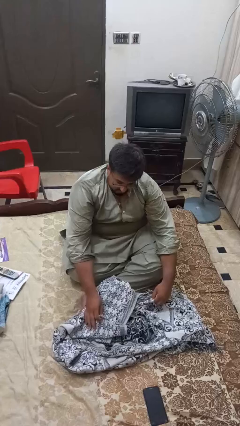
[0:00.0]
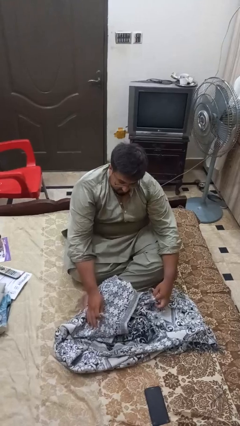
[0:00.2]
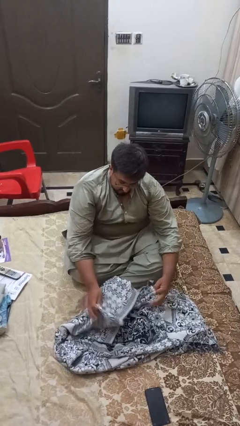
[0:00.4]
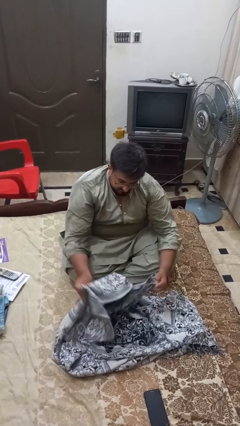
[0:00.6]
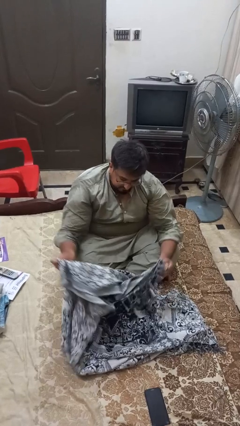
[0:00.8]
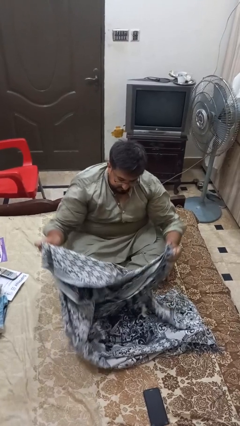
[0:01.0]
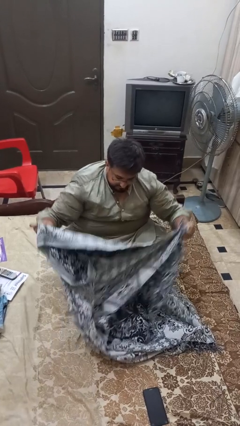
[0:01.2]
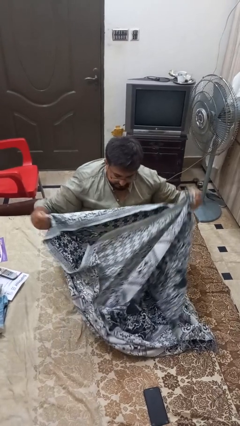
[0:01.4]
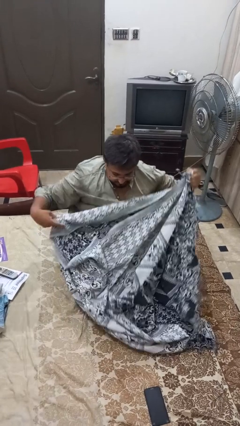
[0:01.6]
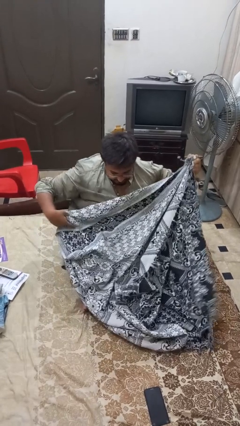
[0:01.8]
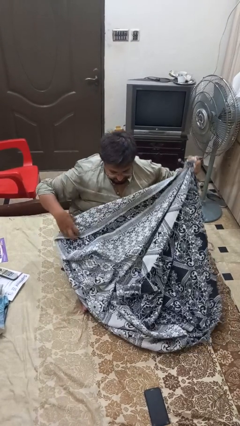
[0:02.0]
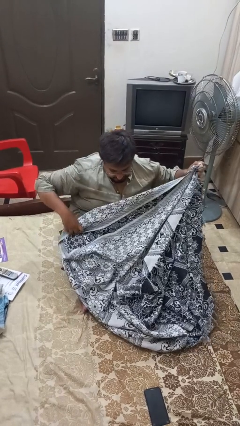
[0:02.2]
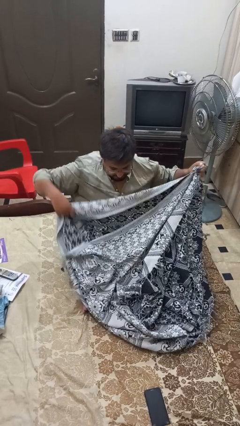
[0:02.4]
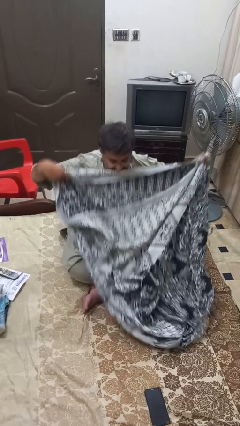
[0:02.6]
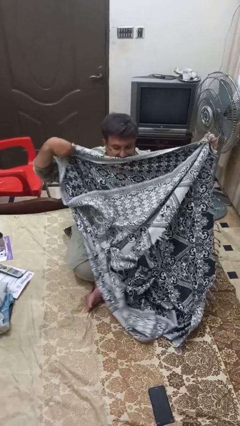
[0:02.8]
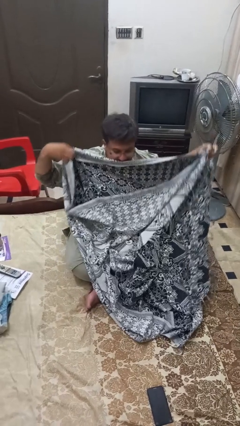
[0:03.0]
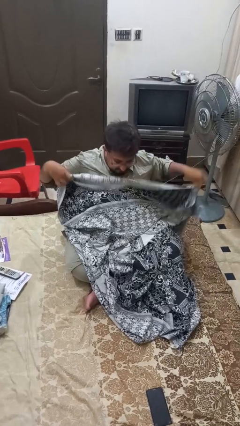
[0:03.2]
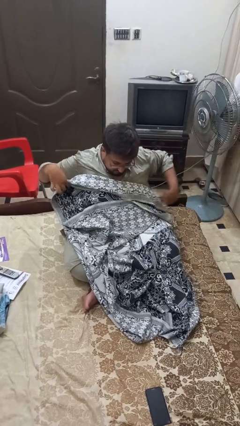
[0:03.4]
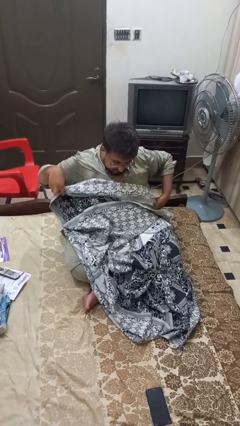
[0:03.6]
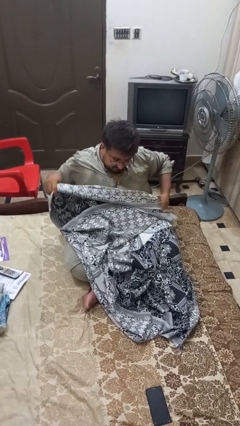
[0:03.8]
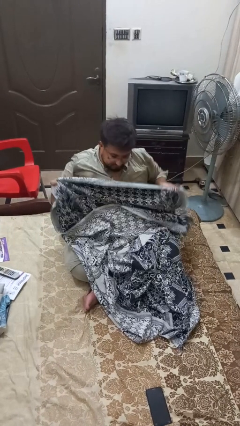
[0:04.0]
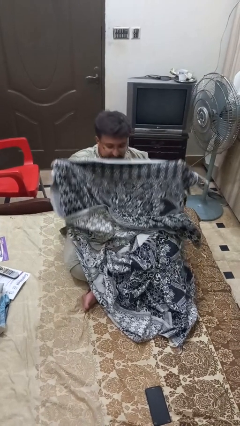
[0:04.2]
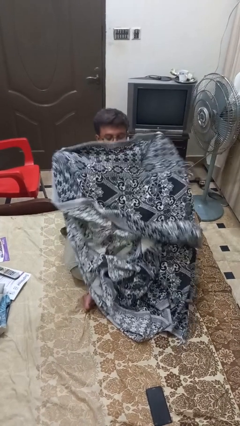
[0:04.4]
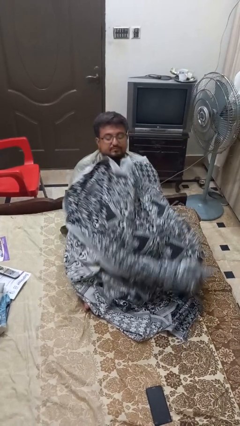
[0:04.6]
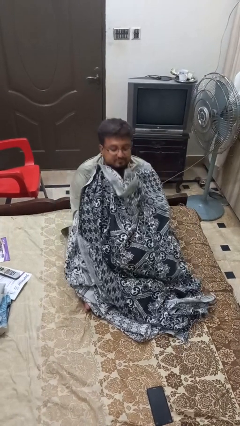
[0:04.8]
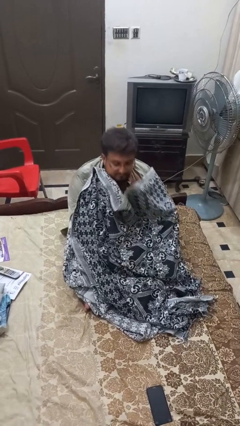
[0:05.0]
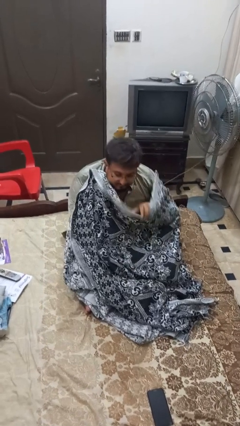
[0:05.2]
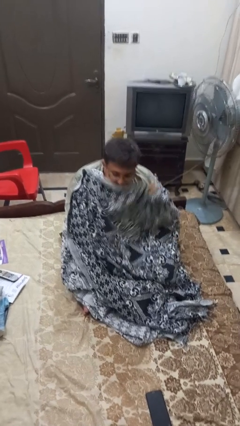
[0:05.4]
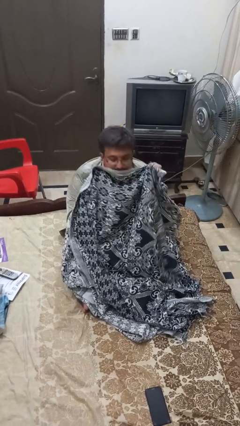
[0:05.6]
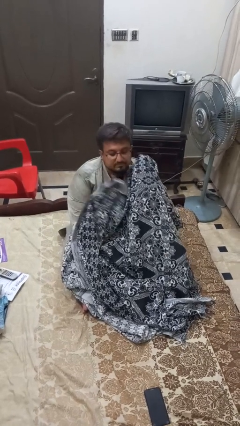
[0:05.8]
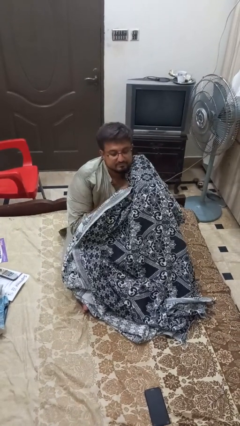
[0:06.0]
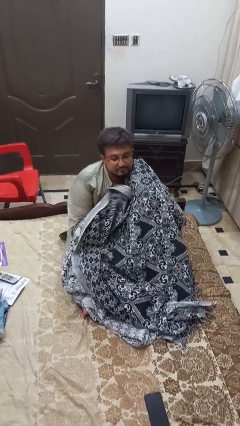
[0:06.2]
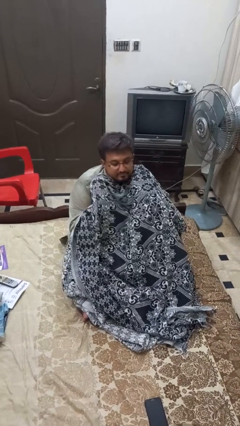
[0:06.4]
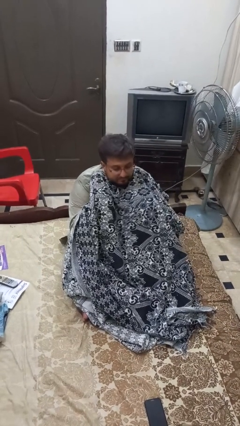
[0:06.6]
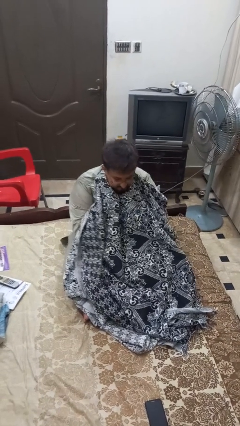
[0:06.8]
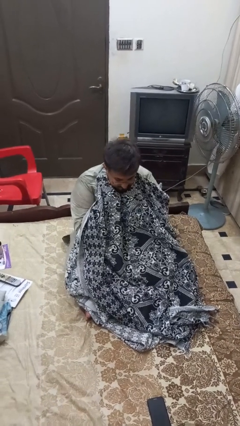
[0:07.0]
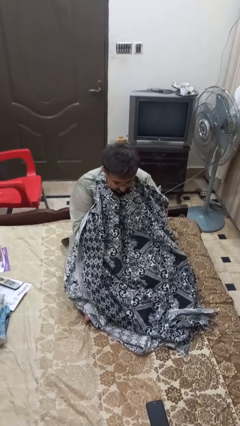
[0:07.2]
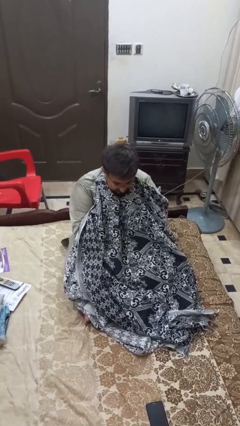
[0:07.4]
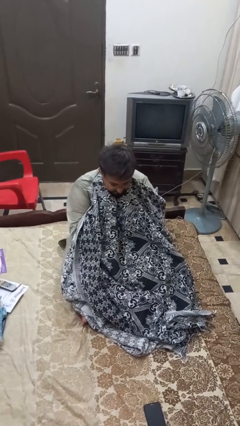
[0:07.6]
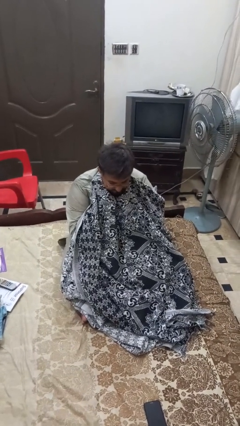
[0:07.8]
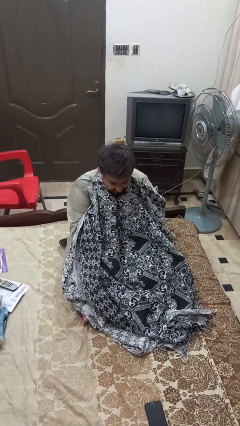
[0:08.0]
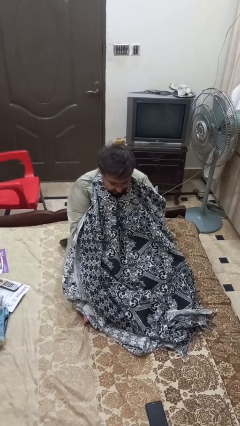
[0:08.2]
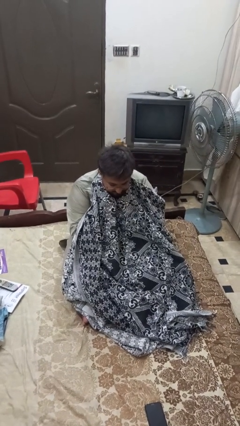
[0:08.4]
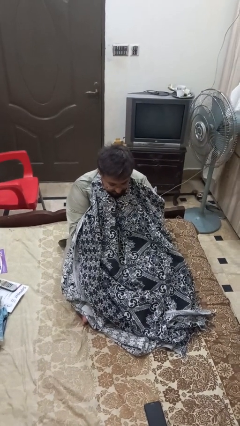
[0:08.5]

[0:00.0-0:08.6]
person covers with blanket

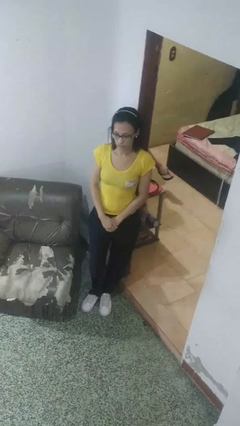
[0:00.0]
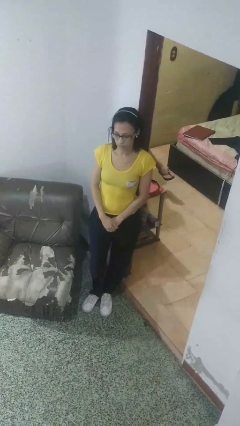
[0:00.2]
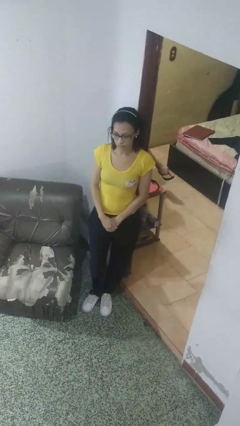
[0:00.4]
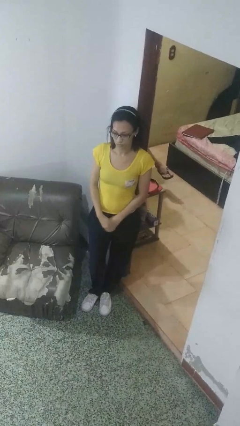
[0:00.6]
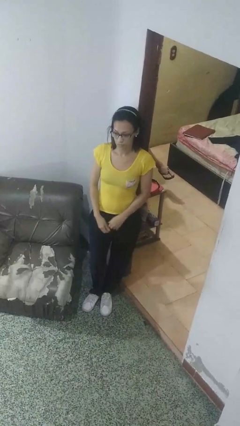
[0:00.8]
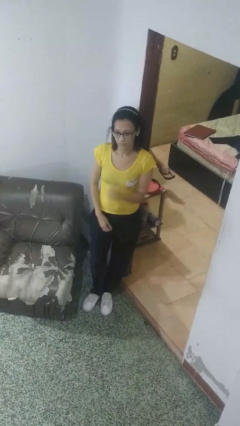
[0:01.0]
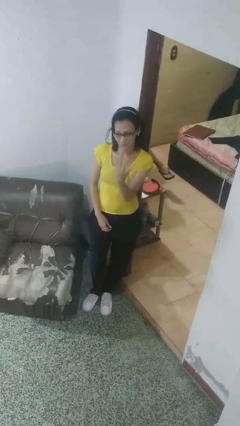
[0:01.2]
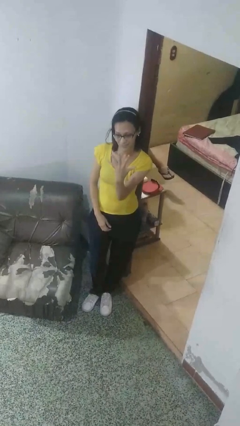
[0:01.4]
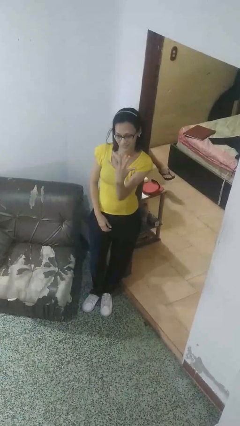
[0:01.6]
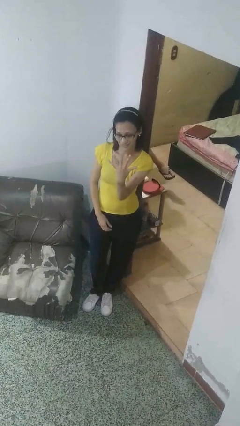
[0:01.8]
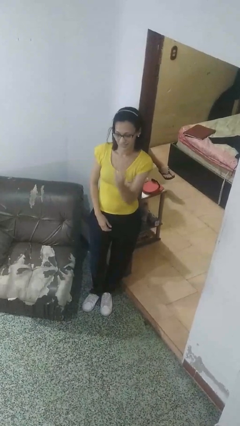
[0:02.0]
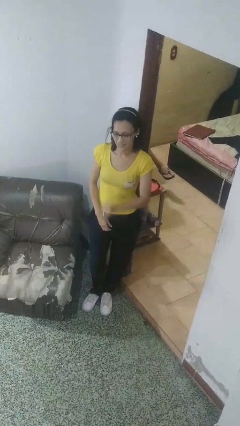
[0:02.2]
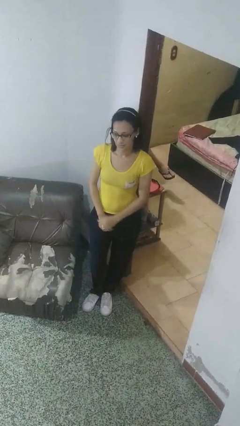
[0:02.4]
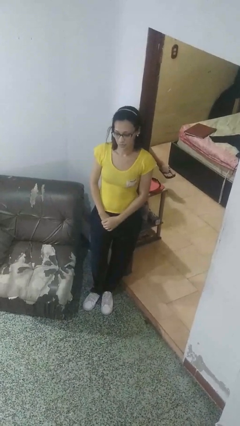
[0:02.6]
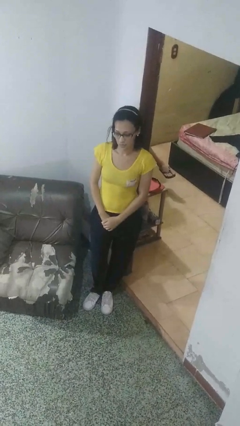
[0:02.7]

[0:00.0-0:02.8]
person gestures number five

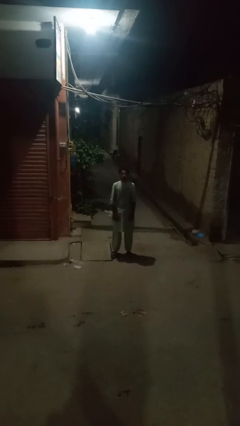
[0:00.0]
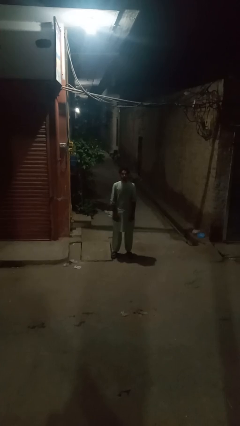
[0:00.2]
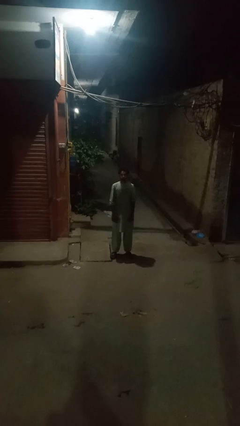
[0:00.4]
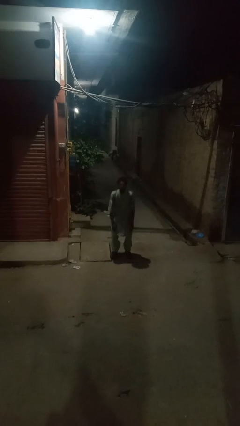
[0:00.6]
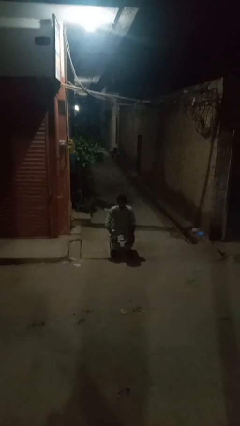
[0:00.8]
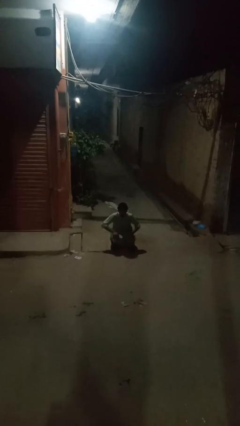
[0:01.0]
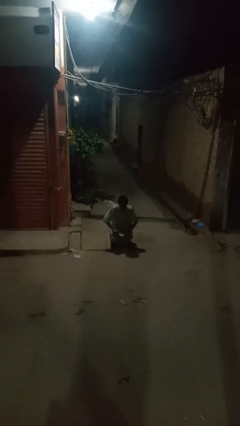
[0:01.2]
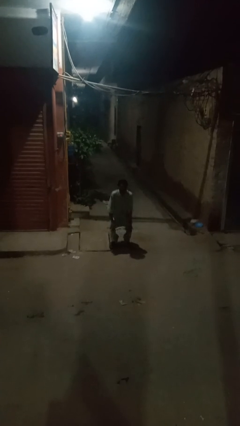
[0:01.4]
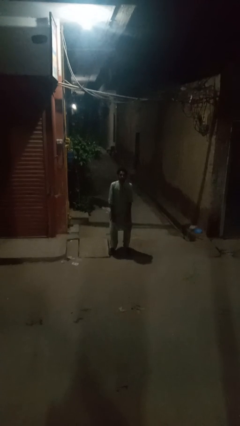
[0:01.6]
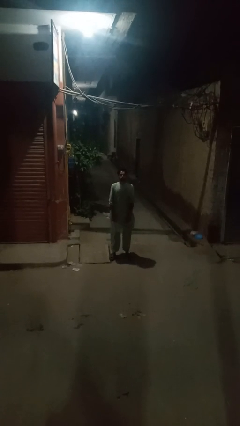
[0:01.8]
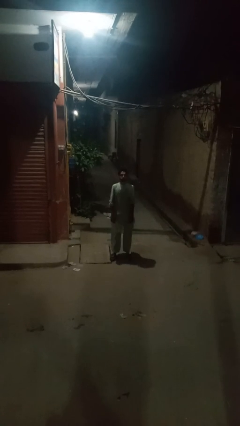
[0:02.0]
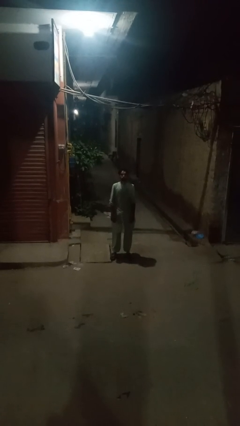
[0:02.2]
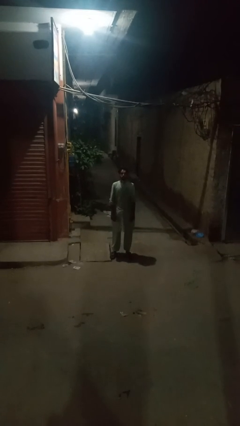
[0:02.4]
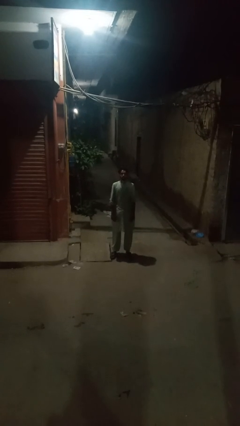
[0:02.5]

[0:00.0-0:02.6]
person exercises with situp

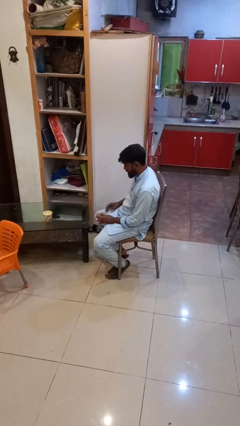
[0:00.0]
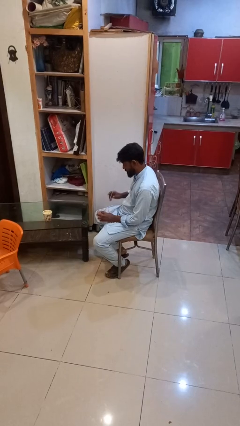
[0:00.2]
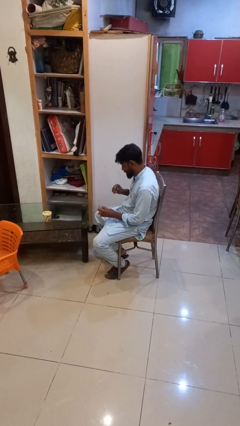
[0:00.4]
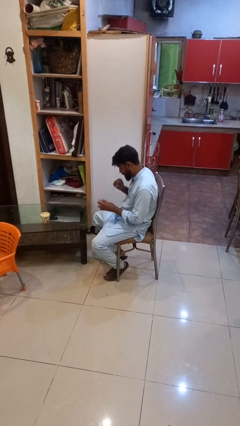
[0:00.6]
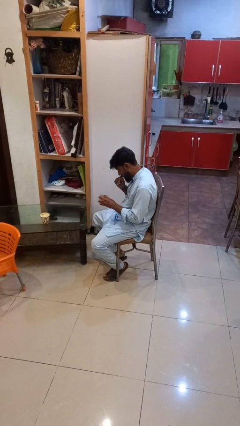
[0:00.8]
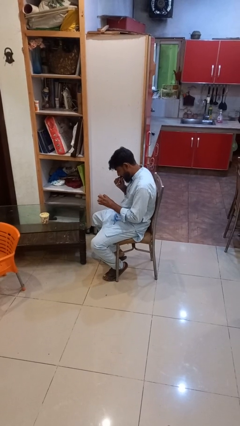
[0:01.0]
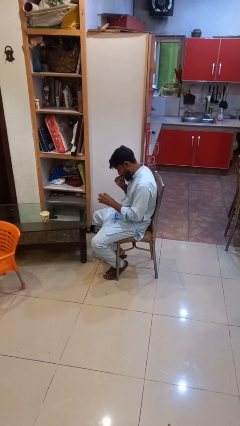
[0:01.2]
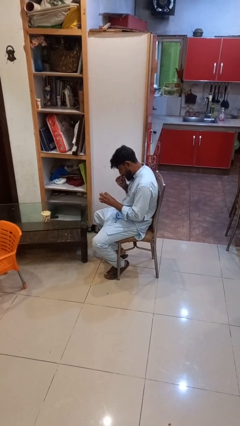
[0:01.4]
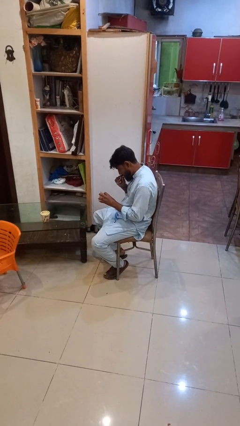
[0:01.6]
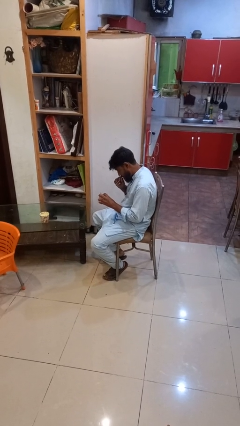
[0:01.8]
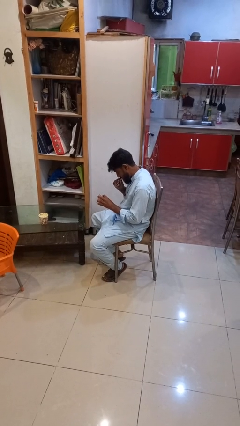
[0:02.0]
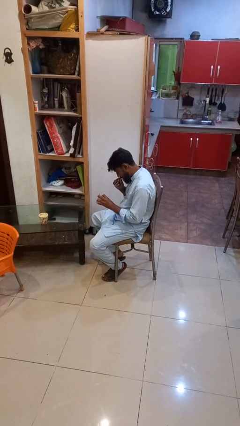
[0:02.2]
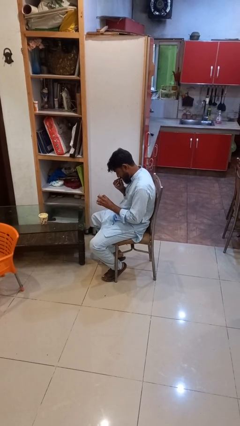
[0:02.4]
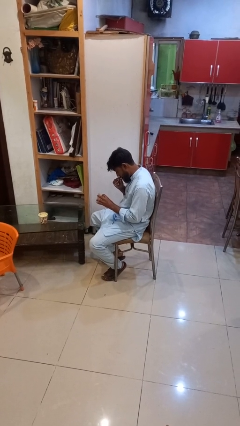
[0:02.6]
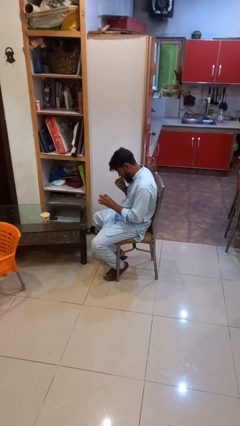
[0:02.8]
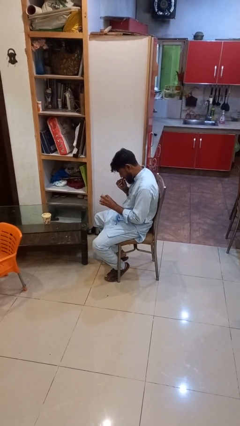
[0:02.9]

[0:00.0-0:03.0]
person drinks from straw

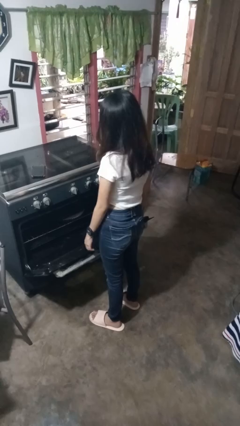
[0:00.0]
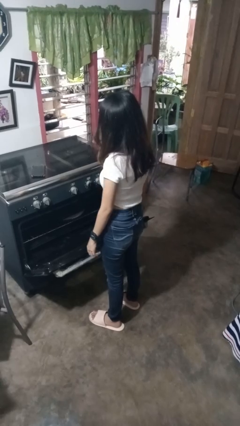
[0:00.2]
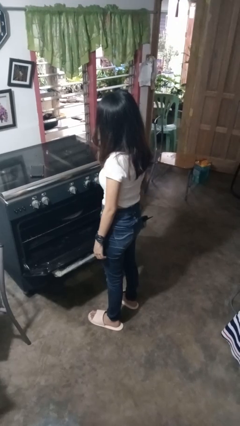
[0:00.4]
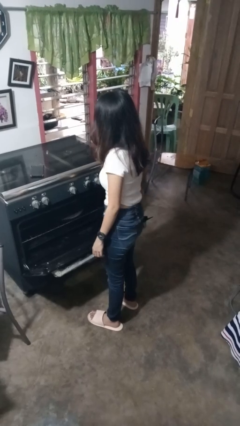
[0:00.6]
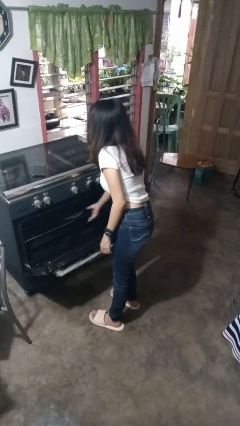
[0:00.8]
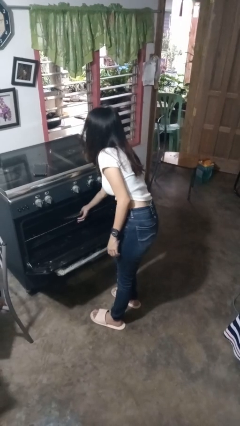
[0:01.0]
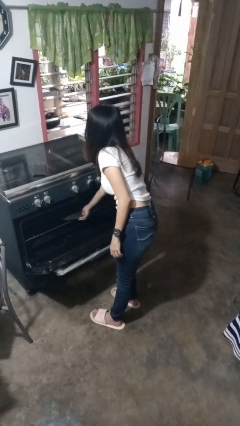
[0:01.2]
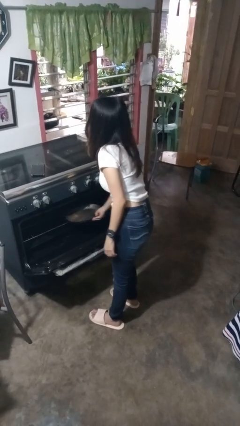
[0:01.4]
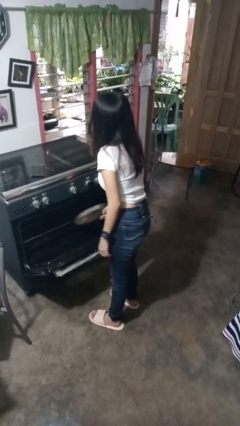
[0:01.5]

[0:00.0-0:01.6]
person takes object from oven
